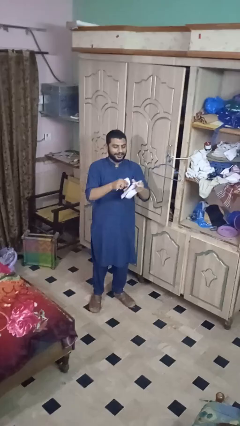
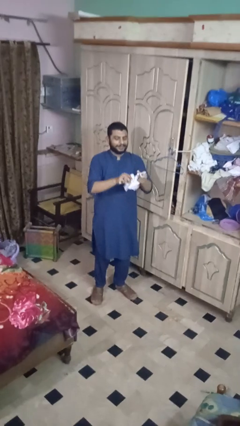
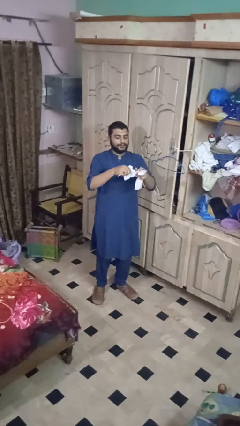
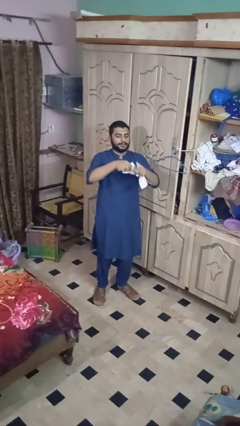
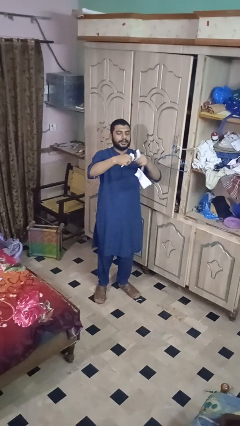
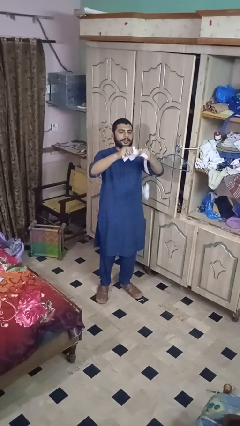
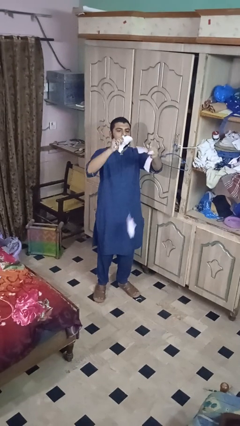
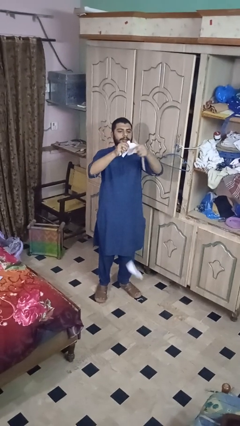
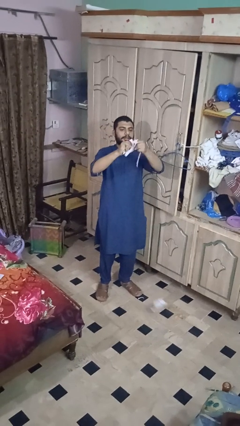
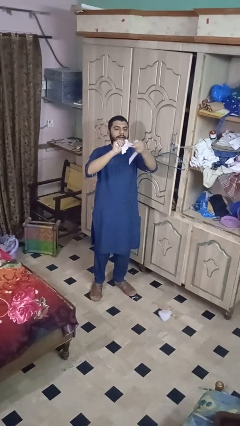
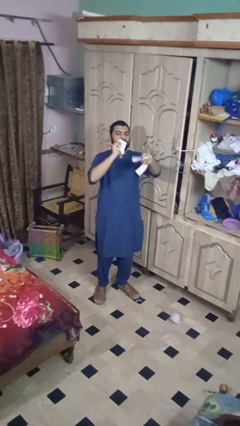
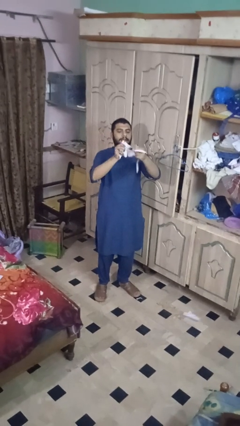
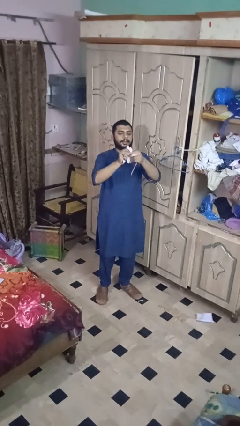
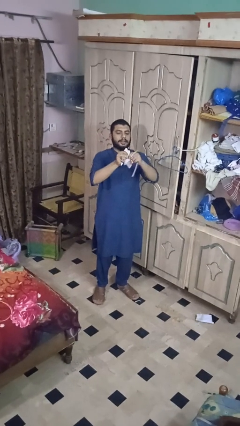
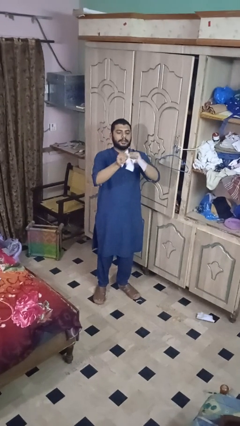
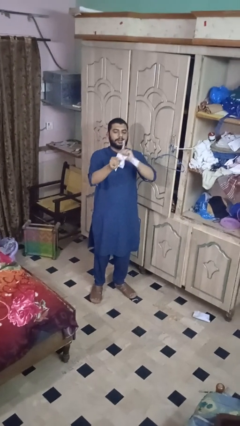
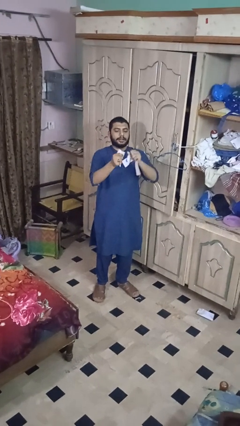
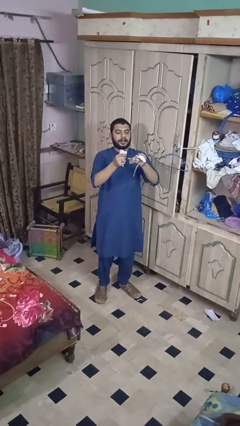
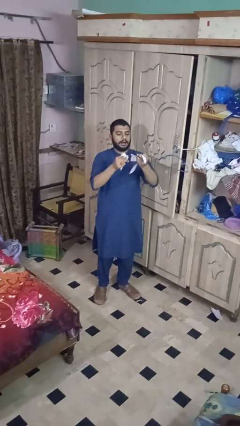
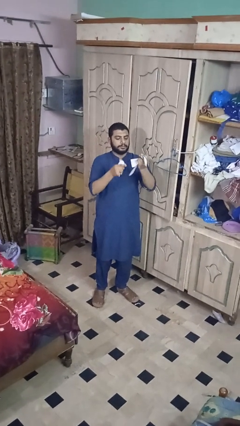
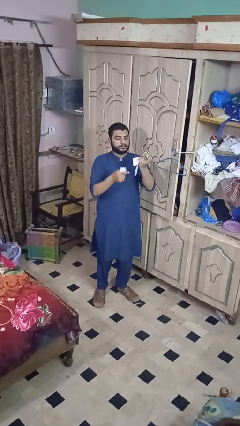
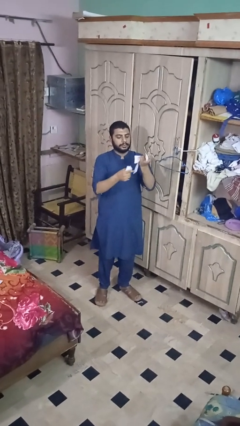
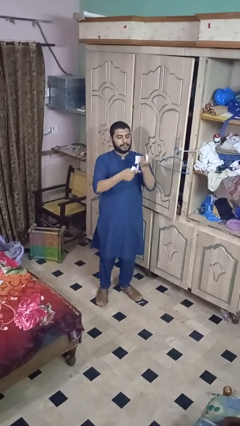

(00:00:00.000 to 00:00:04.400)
person tears paper

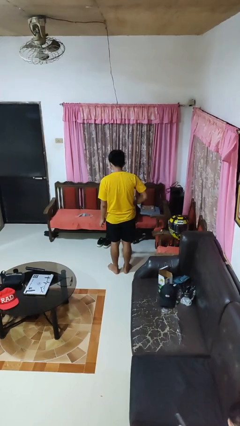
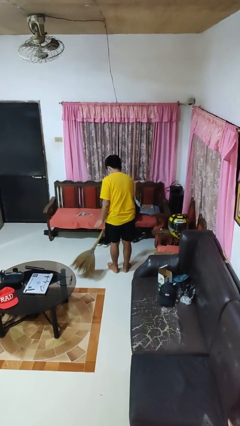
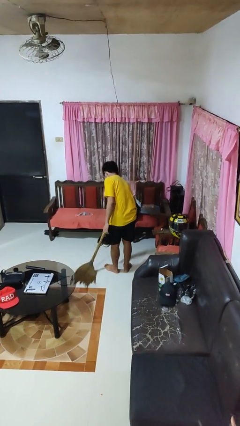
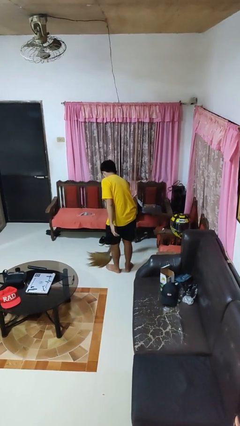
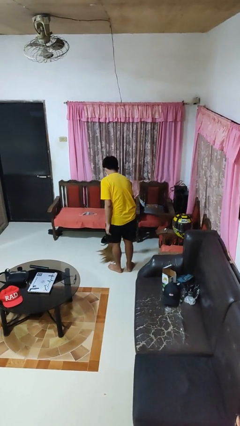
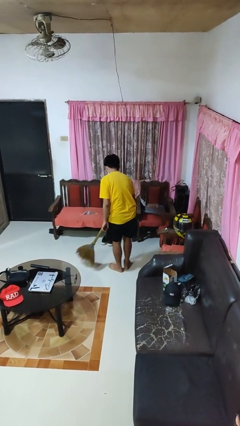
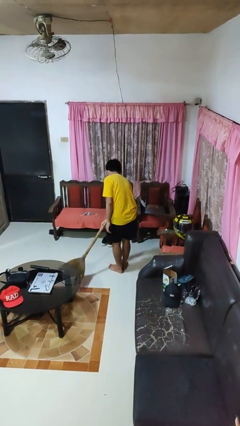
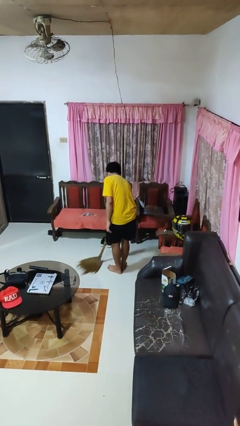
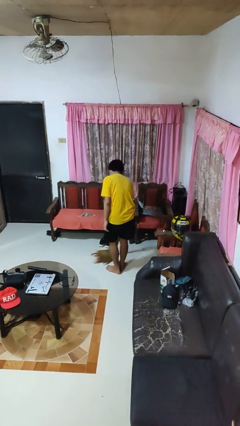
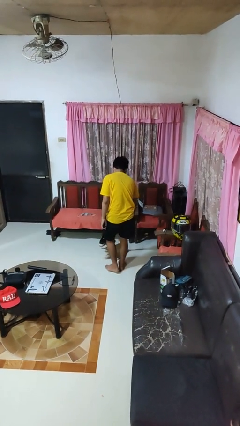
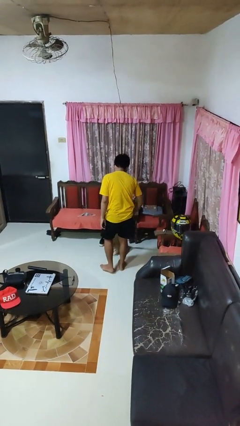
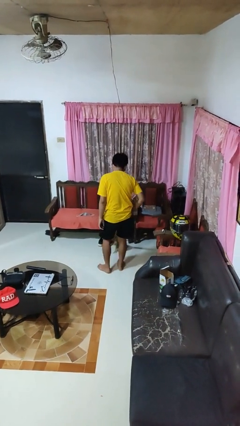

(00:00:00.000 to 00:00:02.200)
person sweeps floor

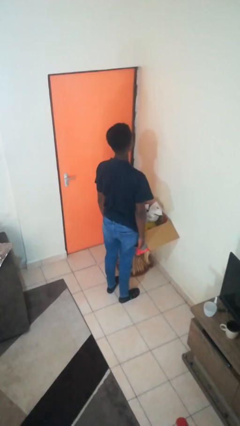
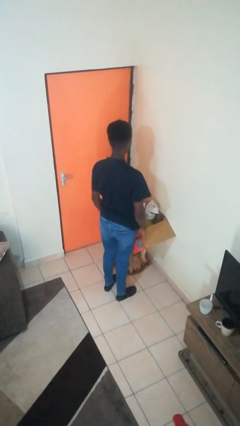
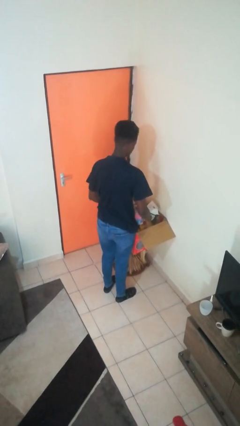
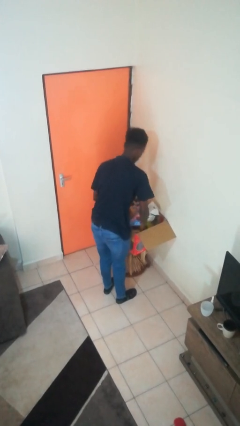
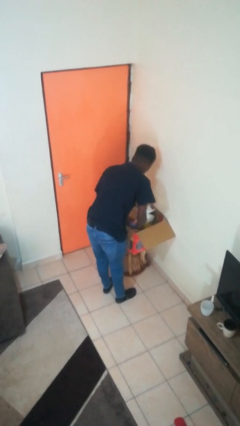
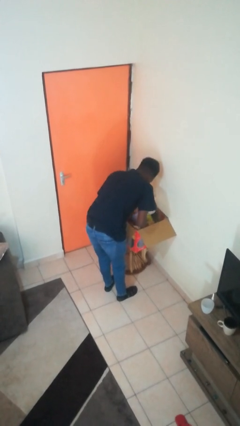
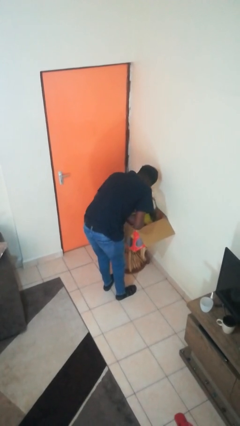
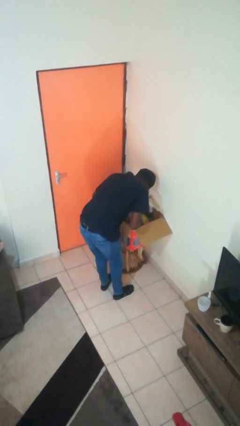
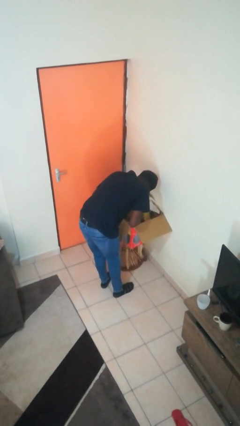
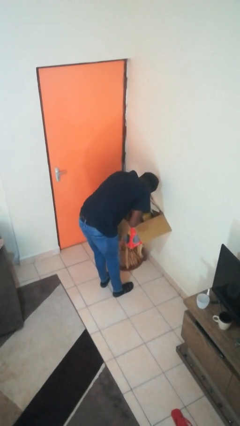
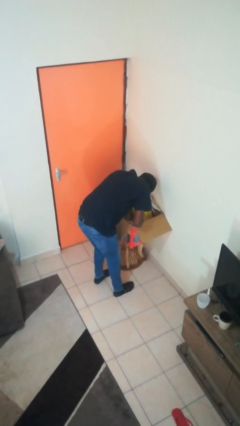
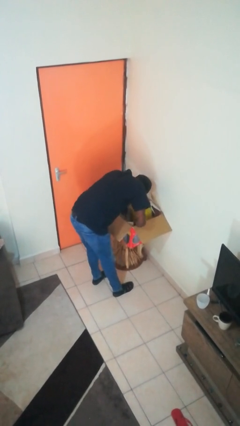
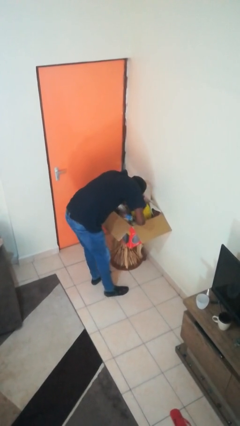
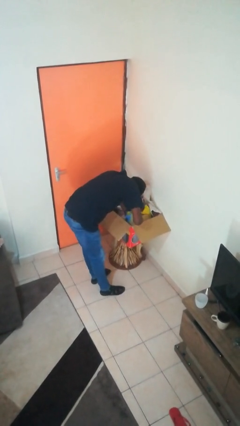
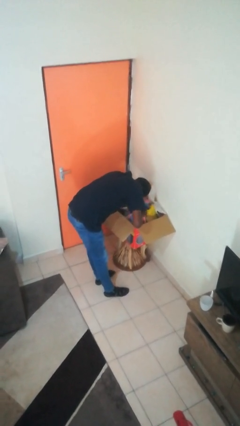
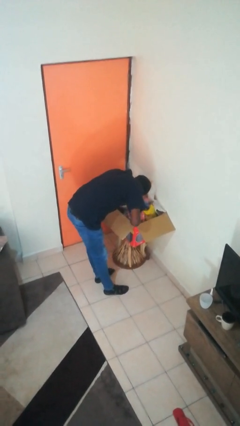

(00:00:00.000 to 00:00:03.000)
person searches in box

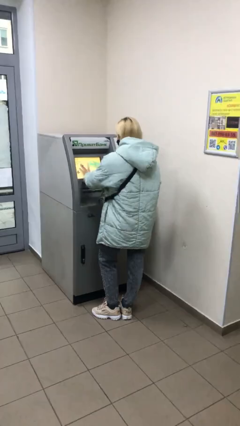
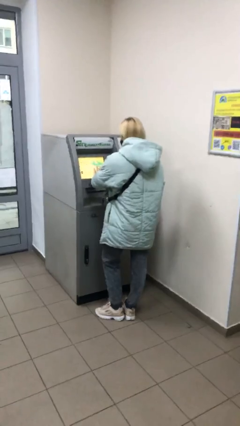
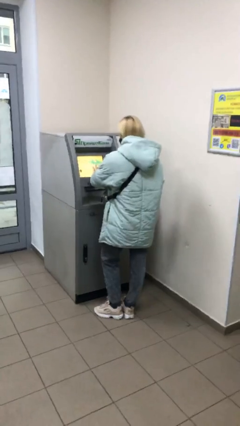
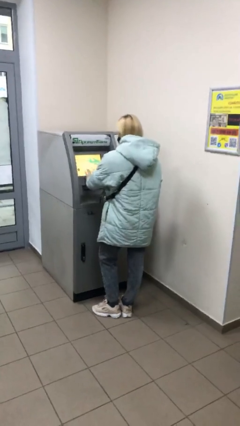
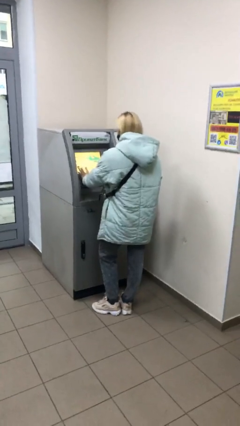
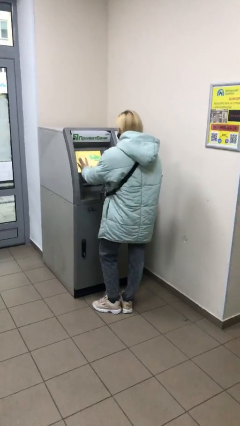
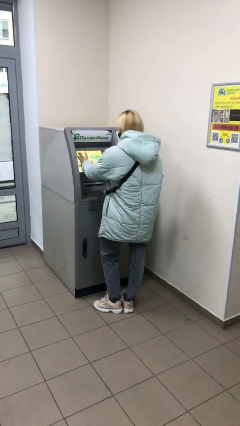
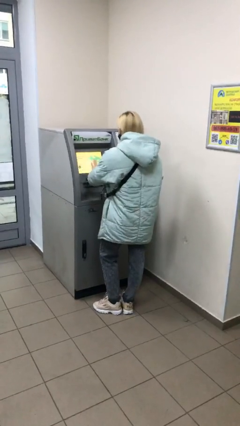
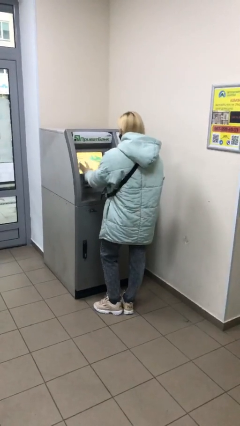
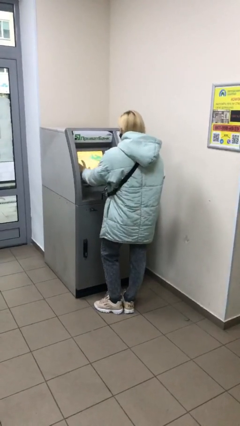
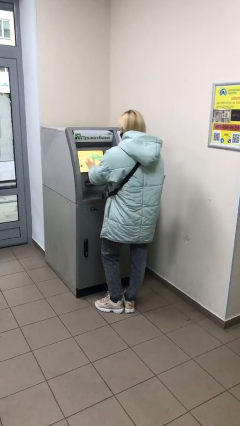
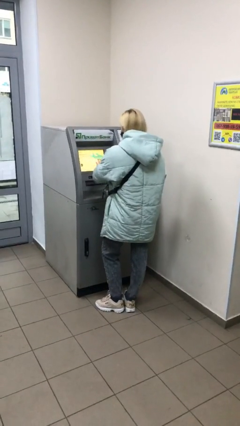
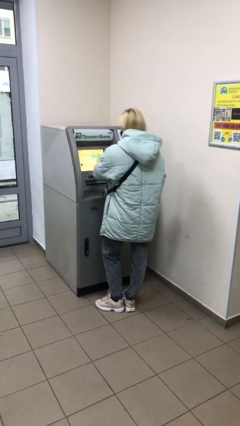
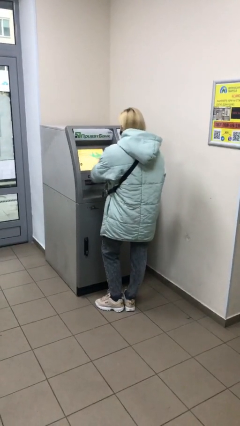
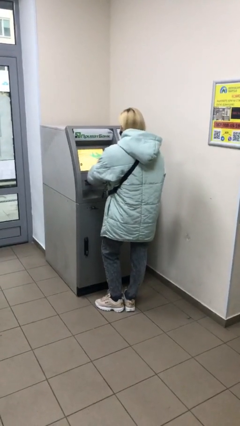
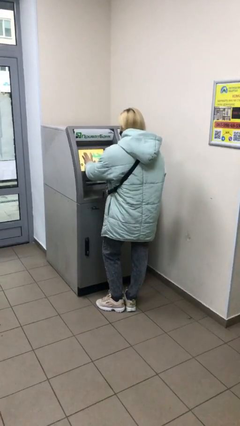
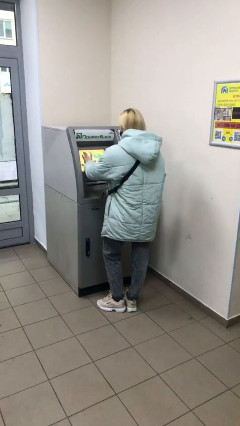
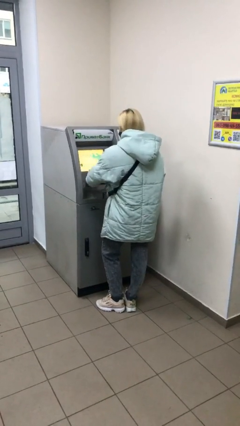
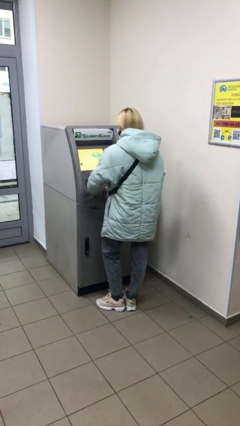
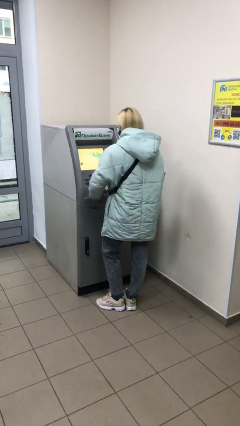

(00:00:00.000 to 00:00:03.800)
person purchases from machine

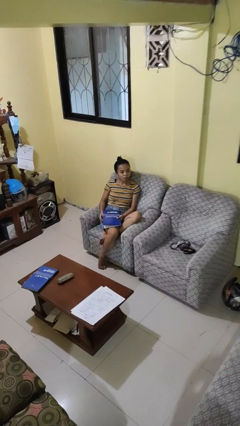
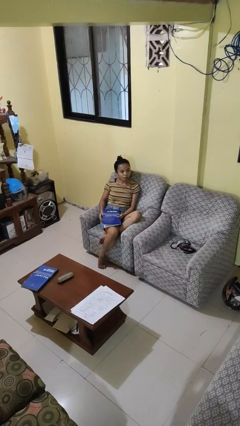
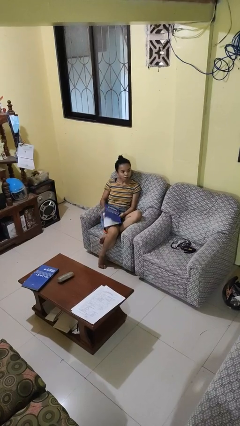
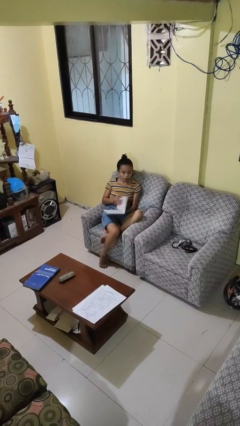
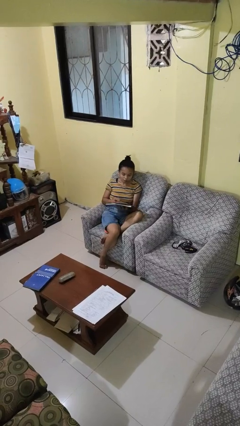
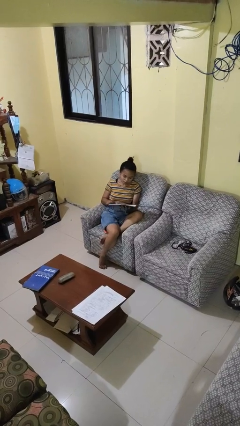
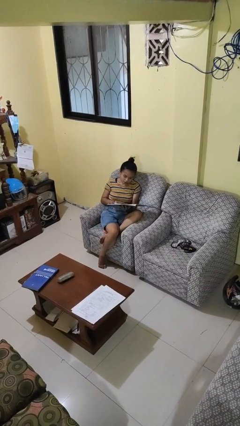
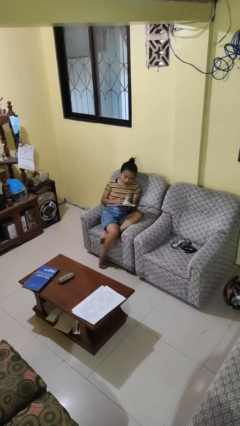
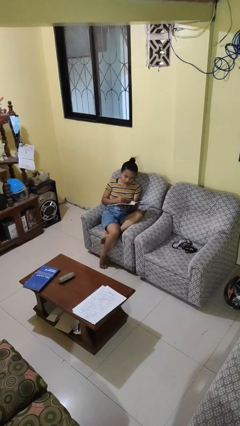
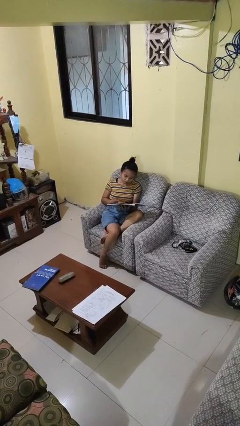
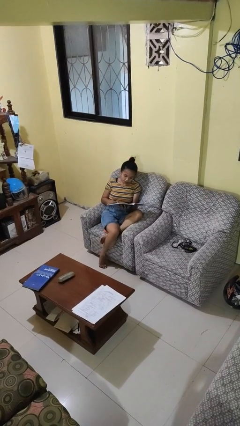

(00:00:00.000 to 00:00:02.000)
person reads book

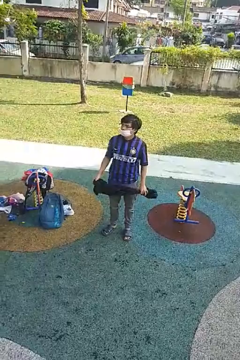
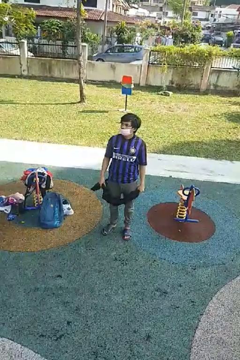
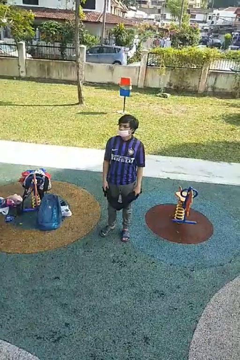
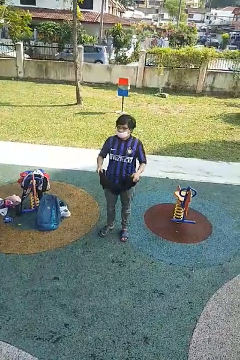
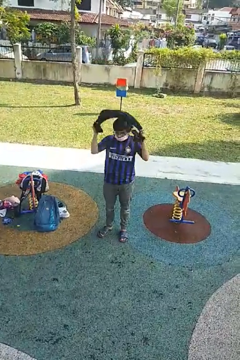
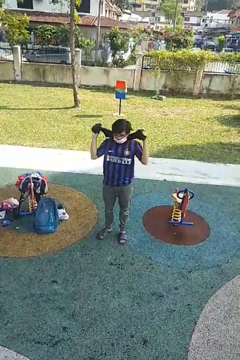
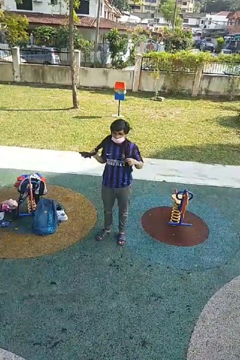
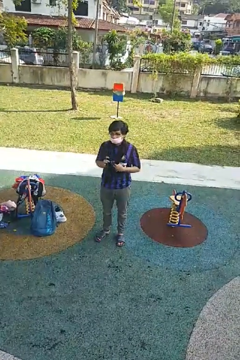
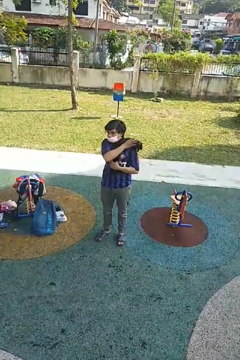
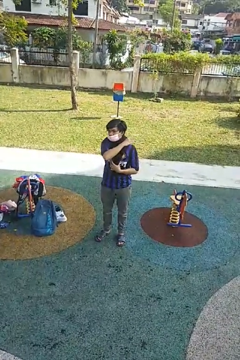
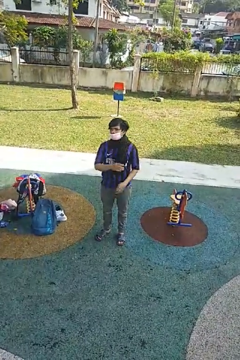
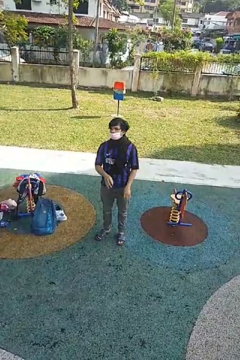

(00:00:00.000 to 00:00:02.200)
person puts on scarf

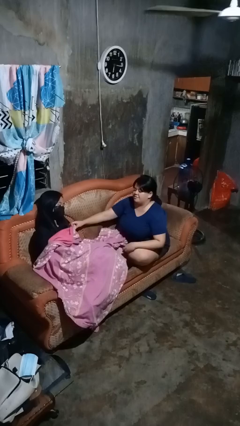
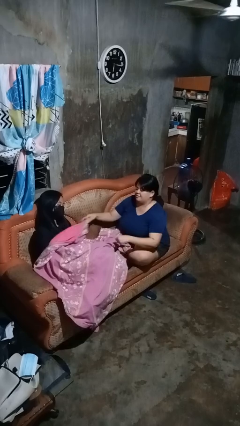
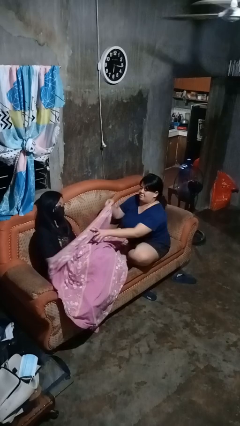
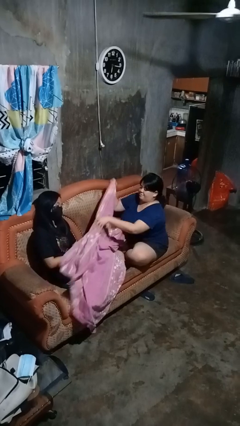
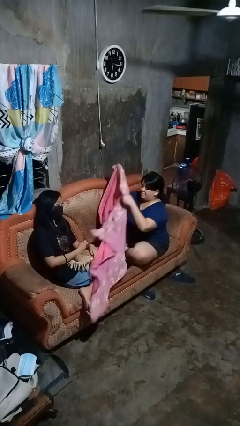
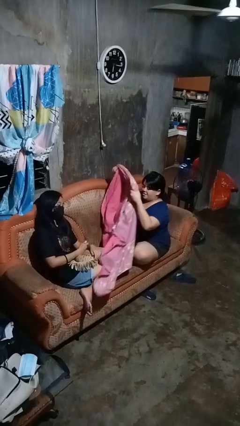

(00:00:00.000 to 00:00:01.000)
person uncovers friend with blanket
